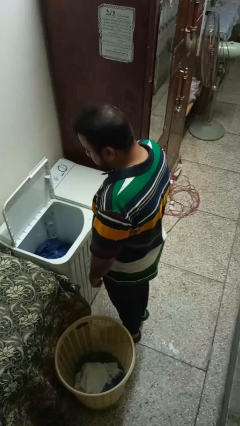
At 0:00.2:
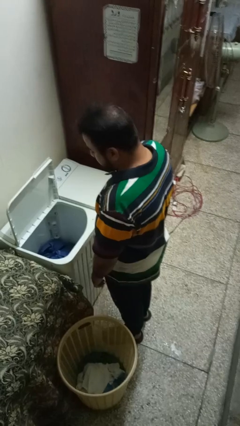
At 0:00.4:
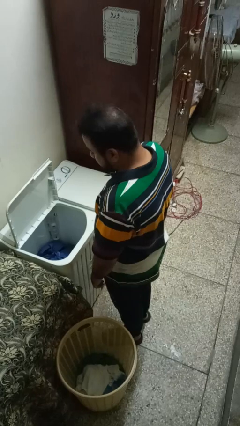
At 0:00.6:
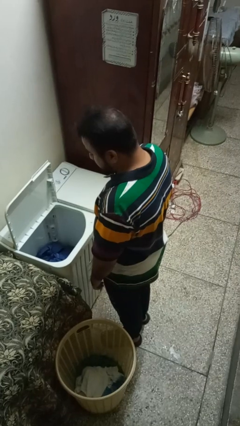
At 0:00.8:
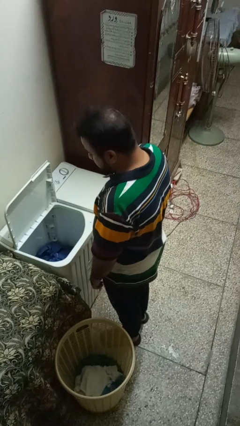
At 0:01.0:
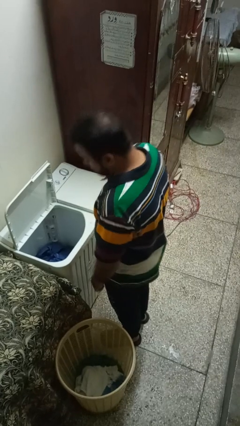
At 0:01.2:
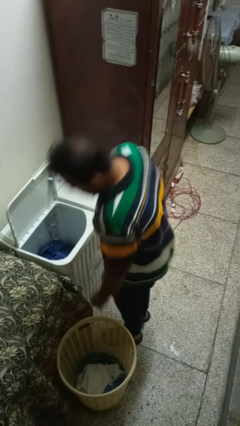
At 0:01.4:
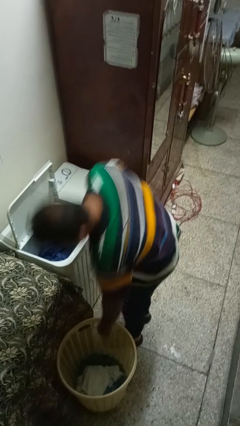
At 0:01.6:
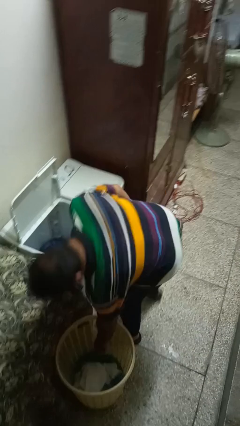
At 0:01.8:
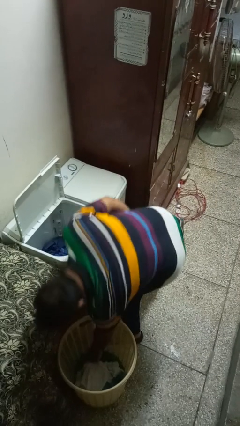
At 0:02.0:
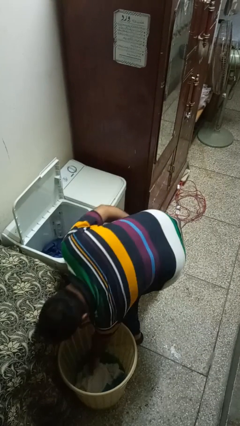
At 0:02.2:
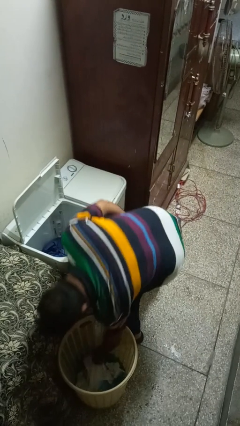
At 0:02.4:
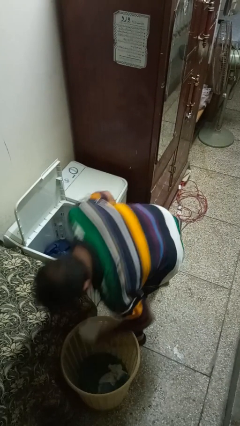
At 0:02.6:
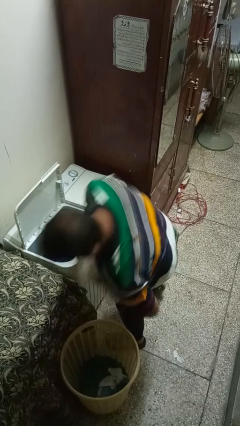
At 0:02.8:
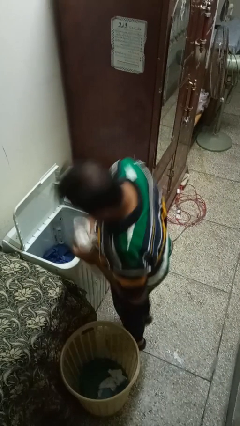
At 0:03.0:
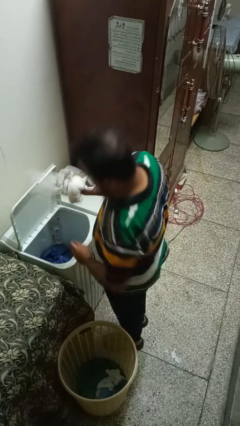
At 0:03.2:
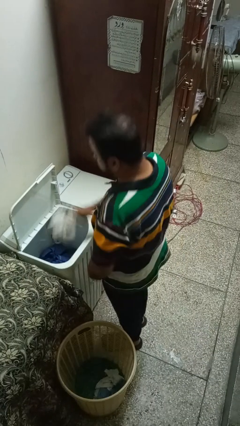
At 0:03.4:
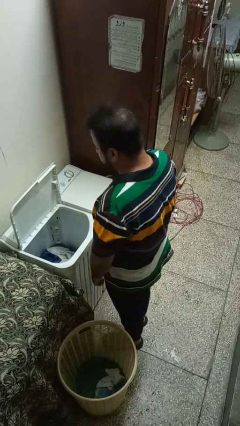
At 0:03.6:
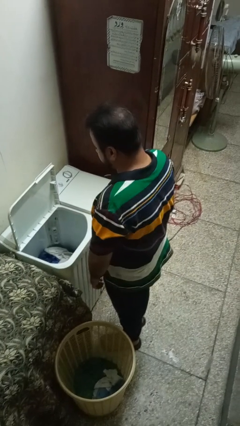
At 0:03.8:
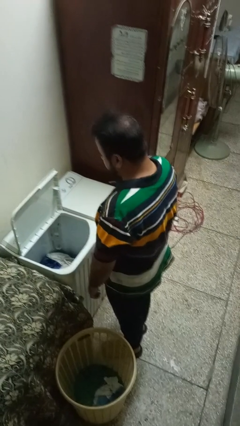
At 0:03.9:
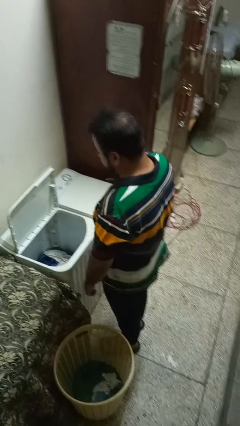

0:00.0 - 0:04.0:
person loads clotheswasher

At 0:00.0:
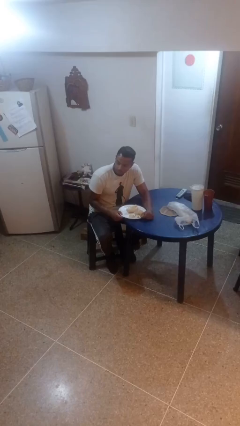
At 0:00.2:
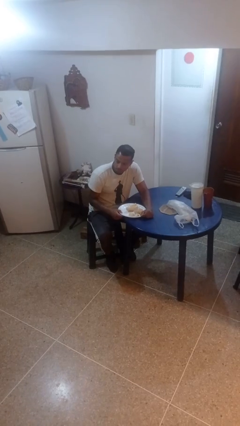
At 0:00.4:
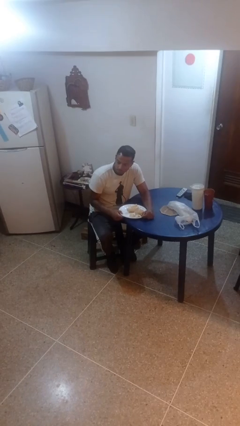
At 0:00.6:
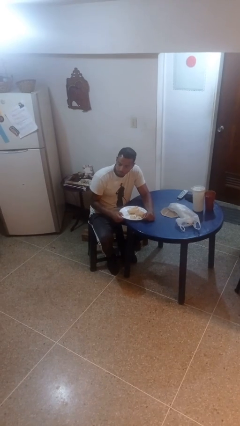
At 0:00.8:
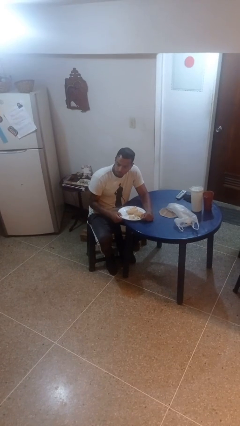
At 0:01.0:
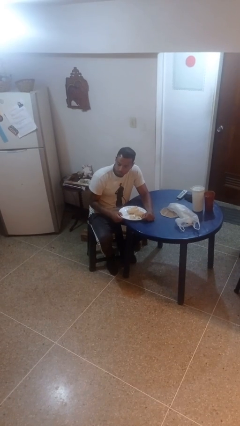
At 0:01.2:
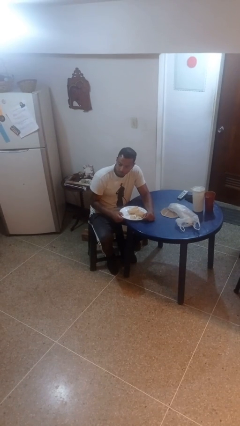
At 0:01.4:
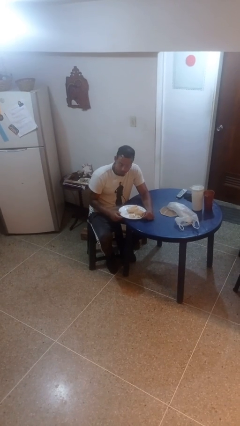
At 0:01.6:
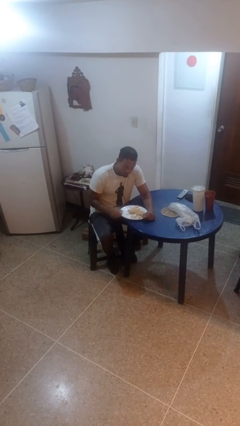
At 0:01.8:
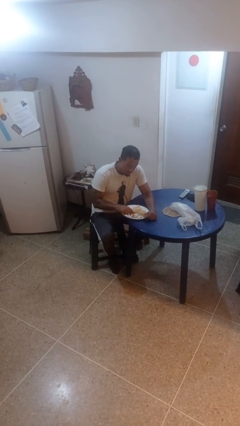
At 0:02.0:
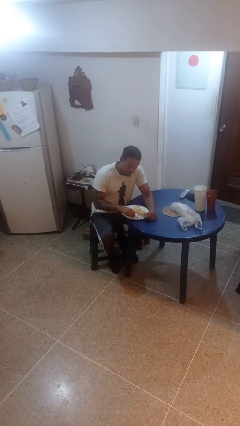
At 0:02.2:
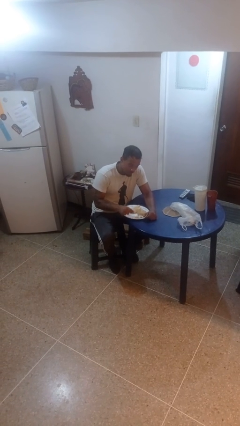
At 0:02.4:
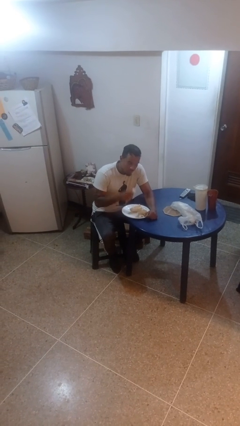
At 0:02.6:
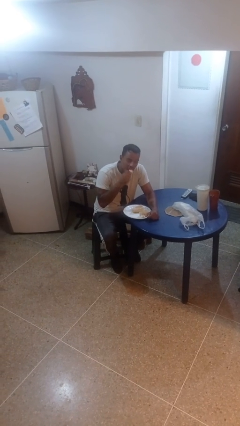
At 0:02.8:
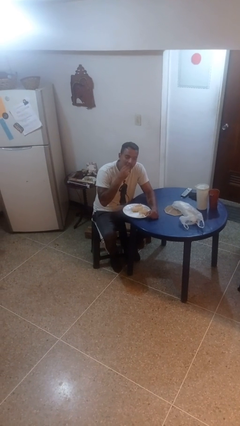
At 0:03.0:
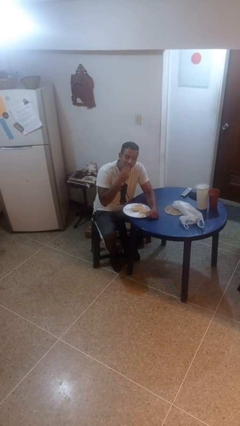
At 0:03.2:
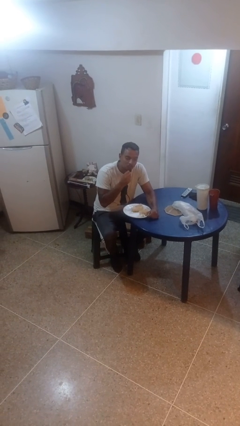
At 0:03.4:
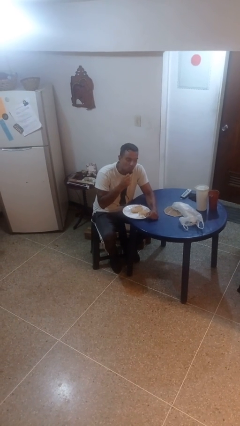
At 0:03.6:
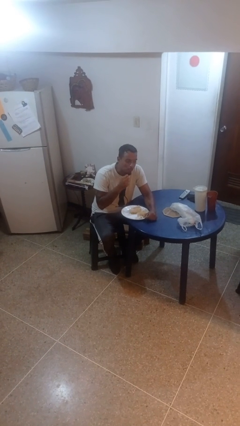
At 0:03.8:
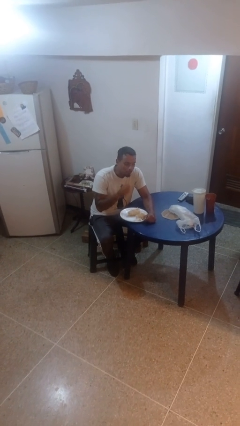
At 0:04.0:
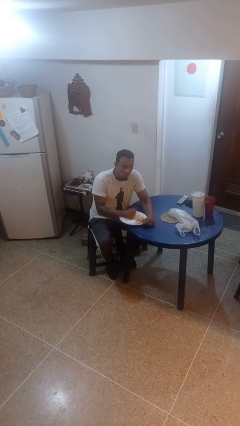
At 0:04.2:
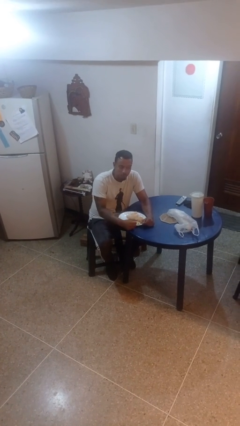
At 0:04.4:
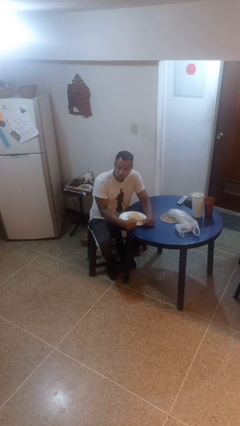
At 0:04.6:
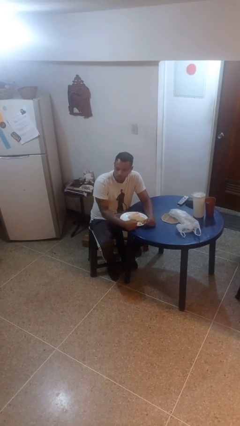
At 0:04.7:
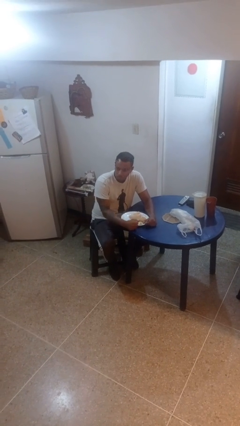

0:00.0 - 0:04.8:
person eats with hands

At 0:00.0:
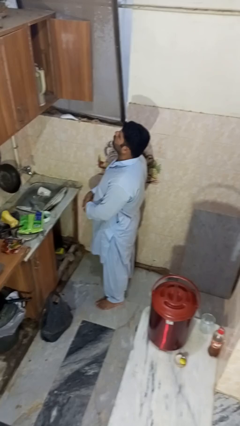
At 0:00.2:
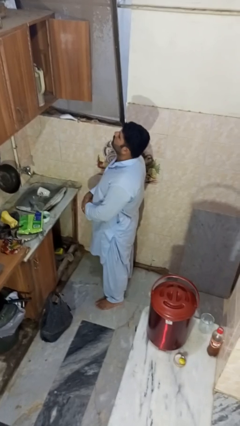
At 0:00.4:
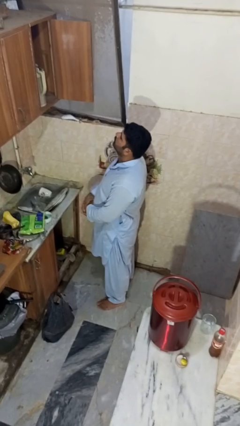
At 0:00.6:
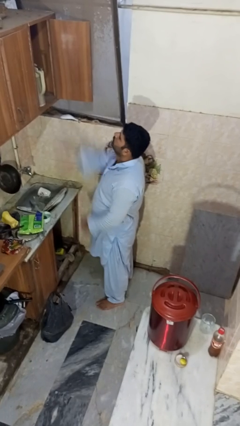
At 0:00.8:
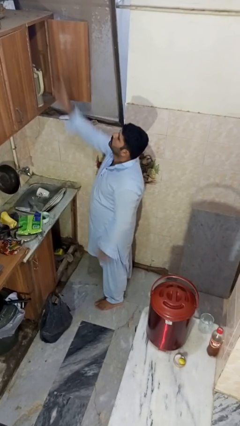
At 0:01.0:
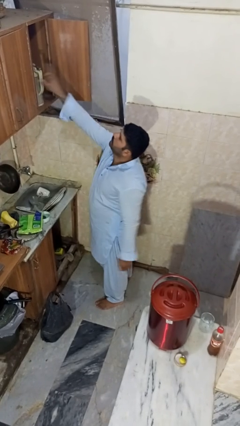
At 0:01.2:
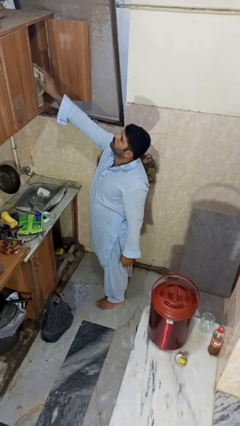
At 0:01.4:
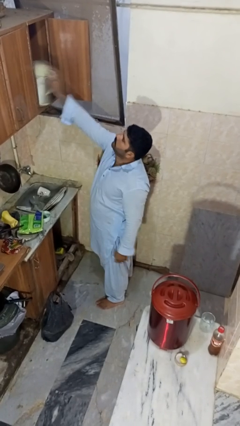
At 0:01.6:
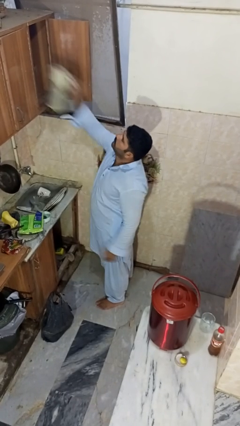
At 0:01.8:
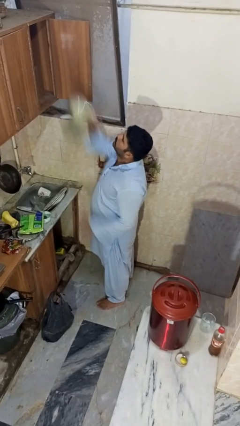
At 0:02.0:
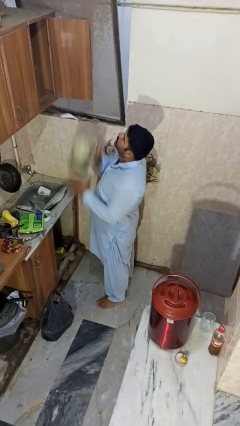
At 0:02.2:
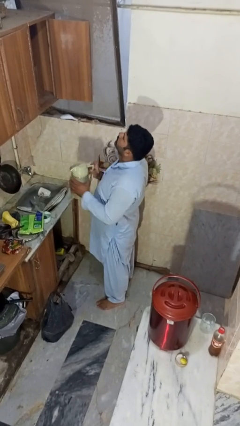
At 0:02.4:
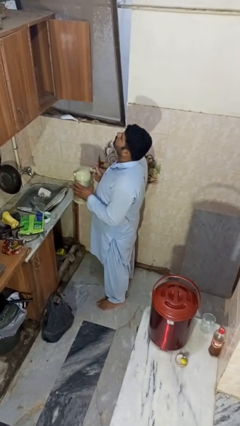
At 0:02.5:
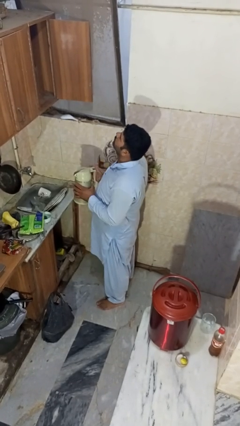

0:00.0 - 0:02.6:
person takes object from cabinet

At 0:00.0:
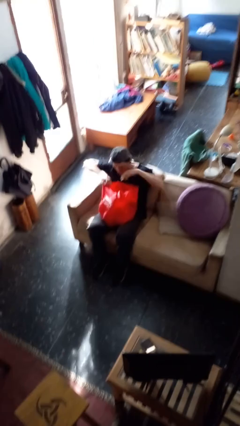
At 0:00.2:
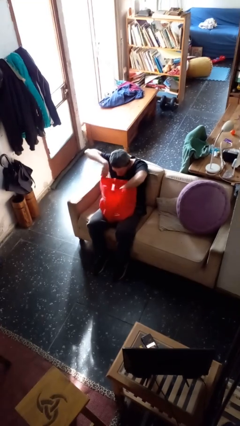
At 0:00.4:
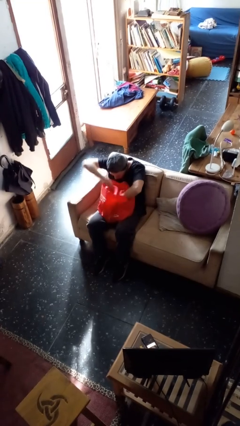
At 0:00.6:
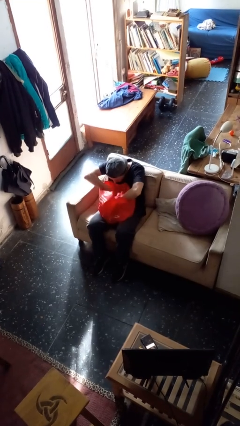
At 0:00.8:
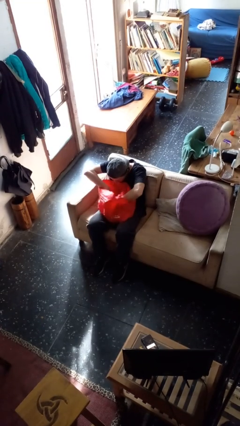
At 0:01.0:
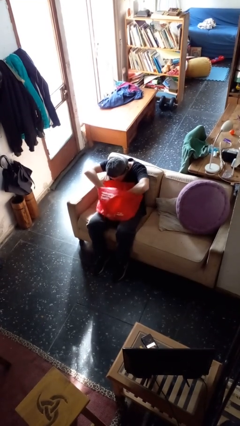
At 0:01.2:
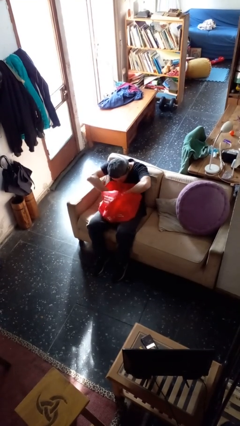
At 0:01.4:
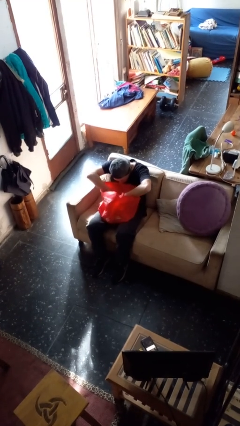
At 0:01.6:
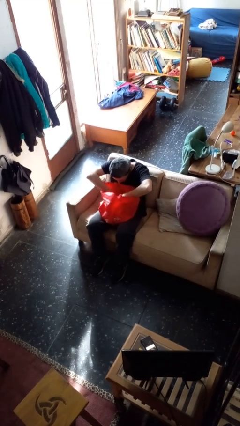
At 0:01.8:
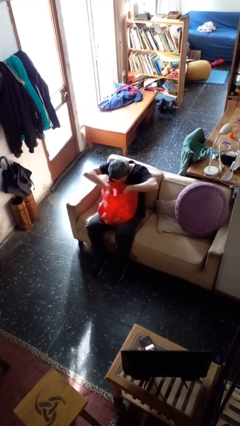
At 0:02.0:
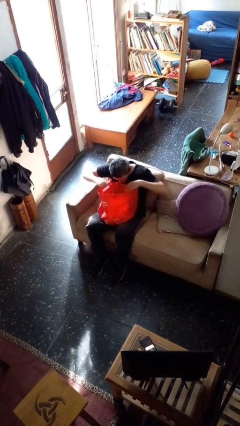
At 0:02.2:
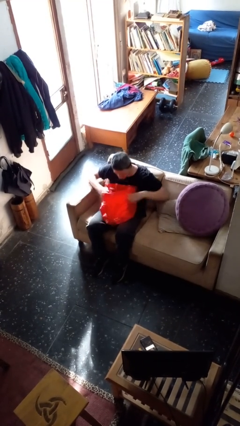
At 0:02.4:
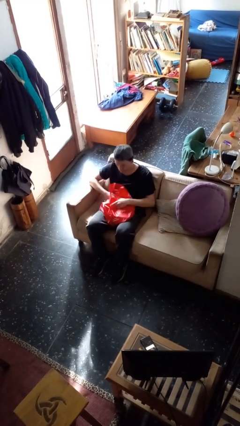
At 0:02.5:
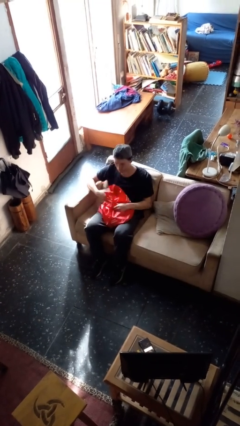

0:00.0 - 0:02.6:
person searches in bag

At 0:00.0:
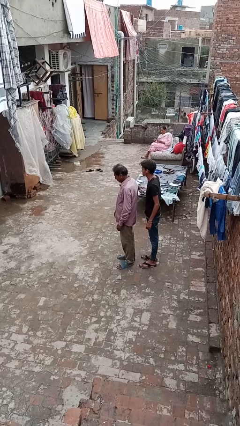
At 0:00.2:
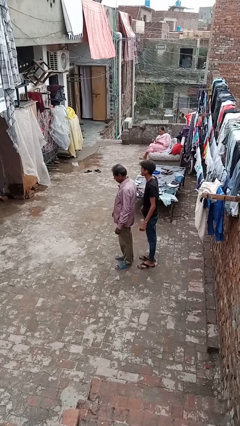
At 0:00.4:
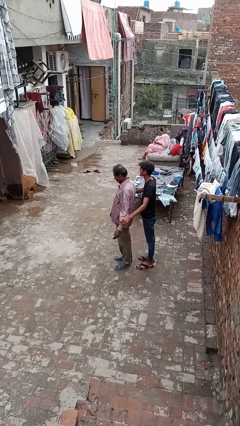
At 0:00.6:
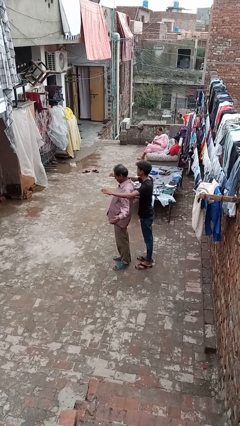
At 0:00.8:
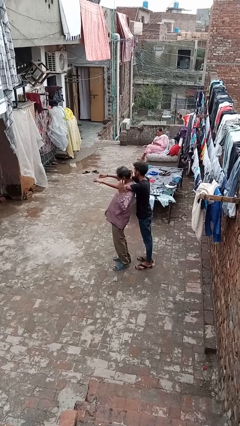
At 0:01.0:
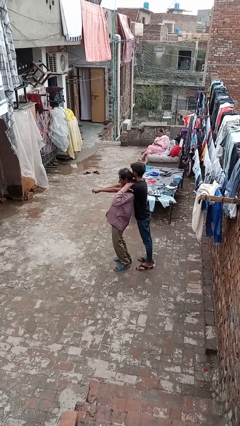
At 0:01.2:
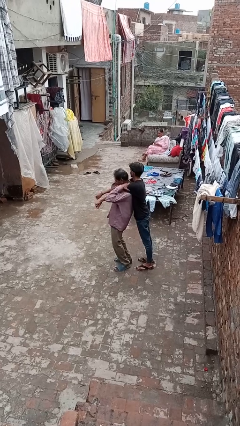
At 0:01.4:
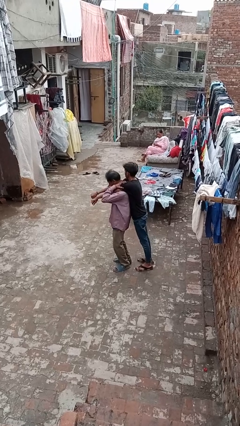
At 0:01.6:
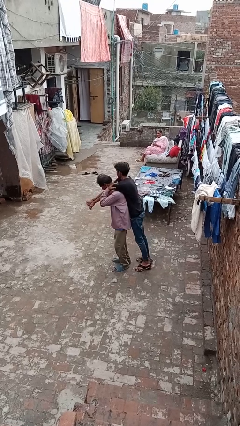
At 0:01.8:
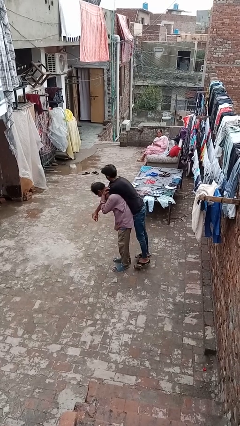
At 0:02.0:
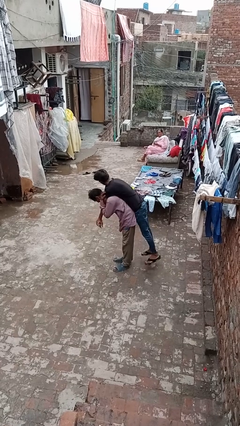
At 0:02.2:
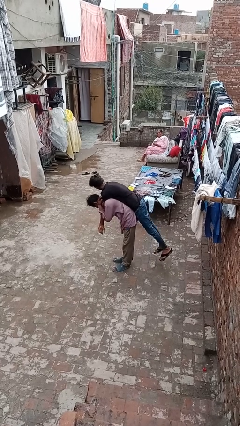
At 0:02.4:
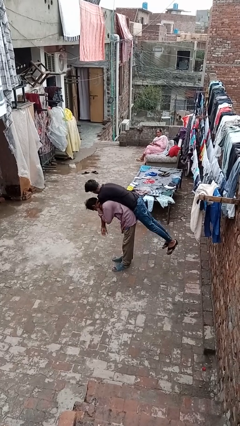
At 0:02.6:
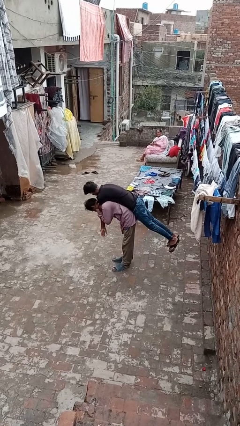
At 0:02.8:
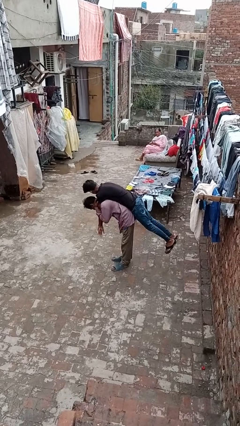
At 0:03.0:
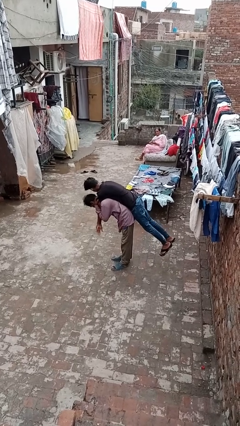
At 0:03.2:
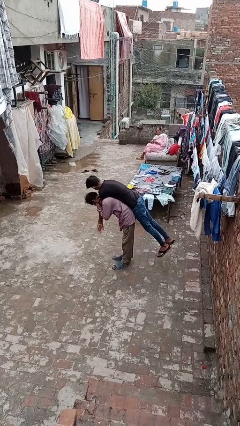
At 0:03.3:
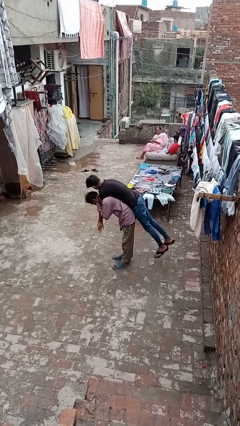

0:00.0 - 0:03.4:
person carries person on shoulders
